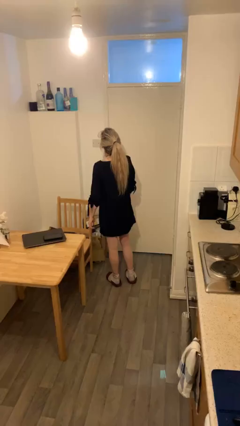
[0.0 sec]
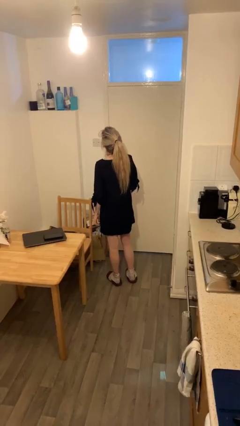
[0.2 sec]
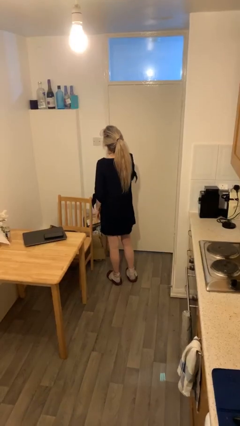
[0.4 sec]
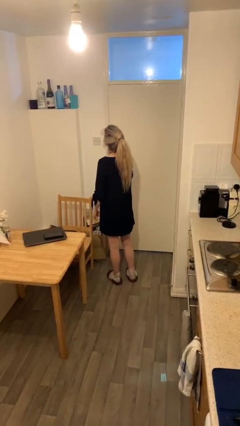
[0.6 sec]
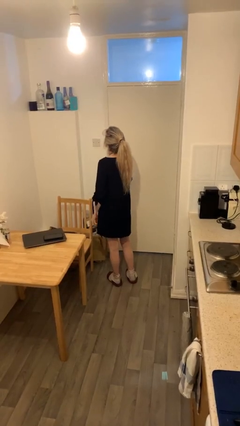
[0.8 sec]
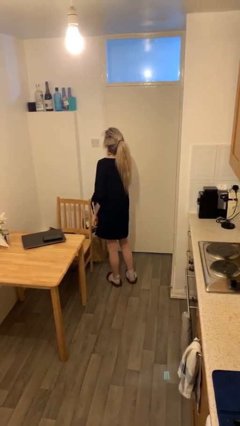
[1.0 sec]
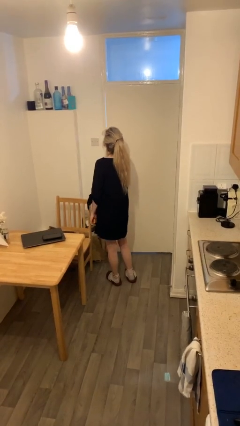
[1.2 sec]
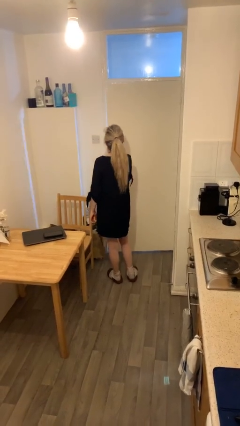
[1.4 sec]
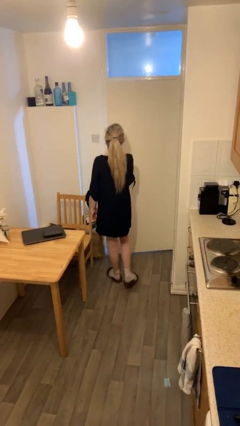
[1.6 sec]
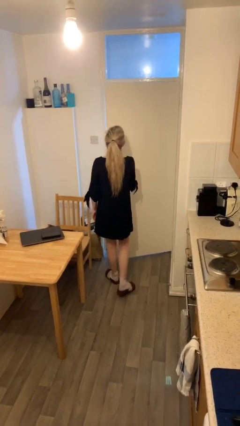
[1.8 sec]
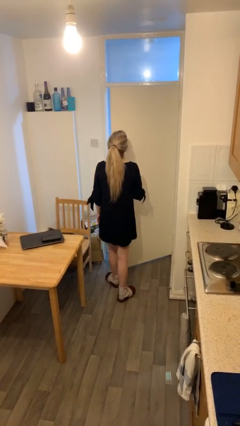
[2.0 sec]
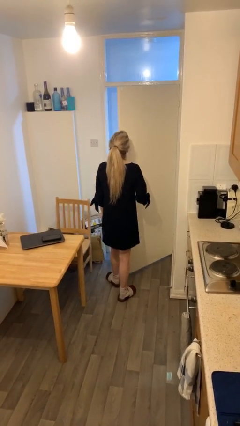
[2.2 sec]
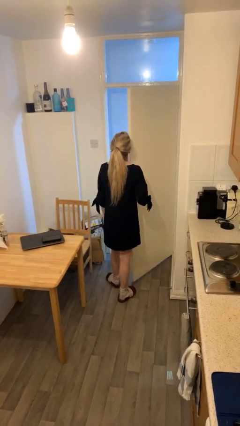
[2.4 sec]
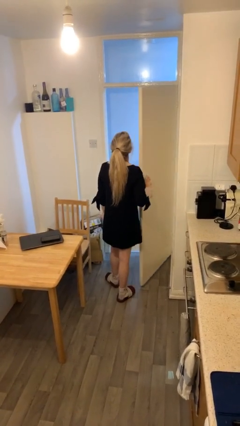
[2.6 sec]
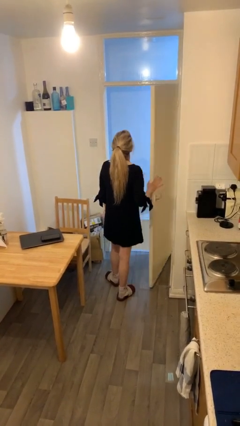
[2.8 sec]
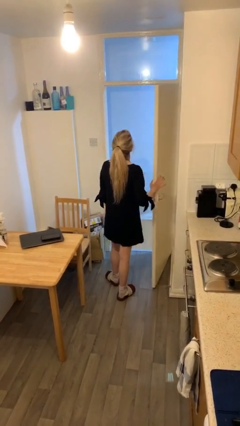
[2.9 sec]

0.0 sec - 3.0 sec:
person opens facility door

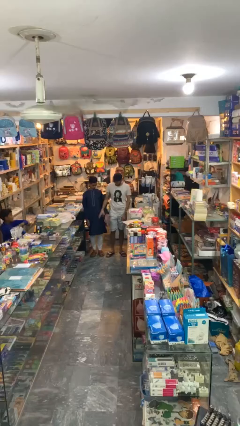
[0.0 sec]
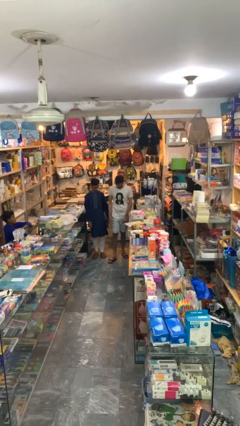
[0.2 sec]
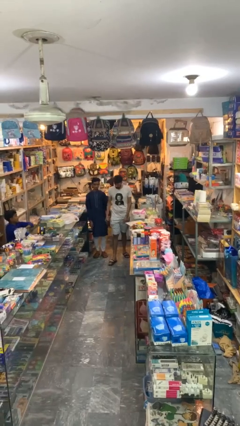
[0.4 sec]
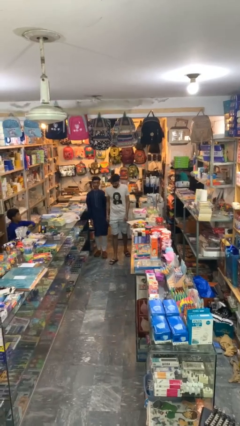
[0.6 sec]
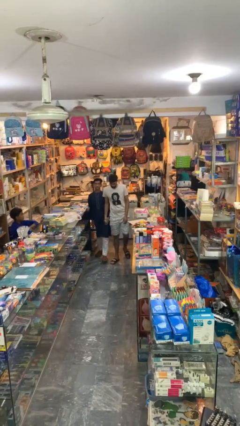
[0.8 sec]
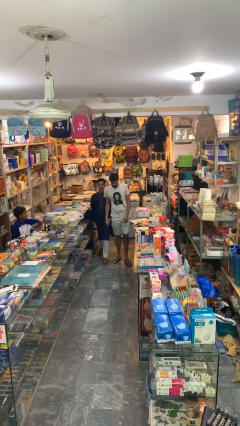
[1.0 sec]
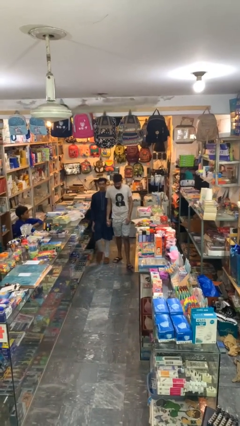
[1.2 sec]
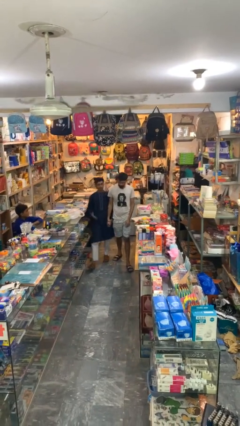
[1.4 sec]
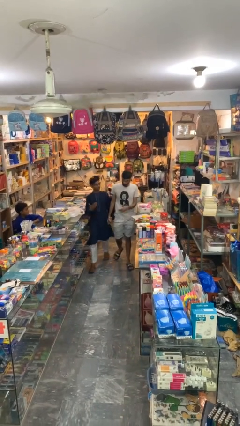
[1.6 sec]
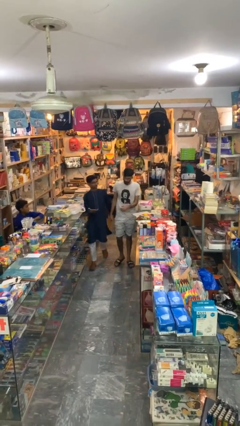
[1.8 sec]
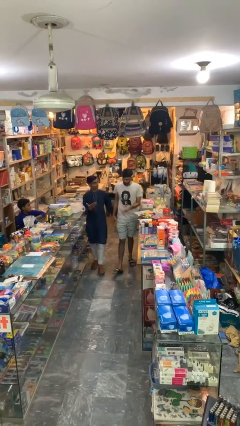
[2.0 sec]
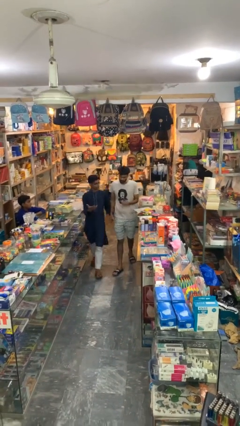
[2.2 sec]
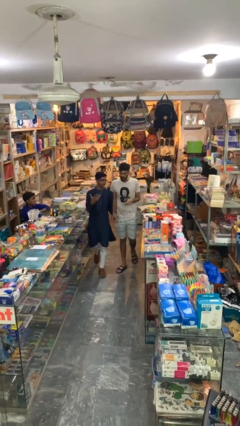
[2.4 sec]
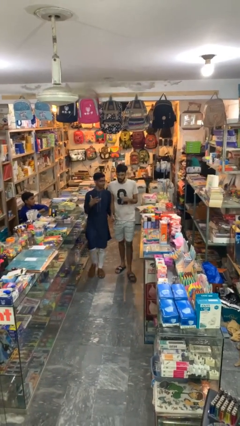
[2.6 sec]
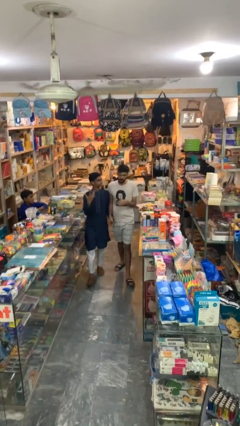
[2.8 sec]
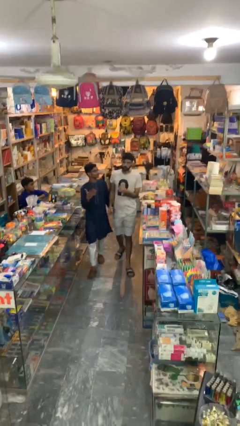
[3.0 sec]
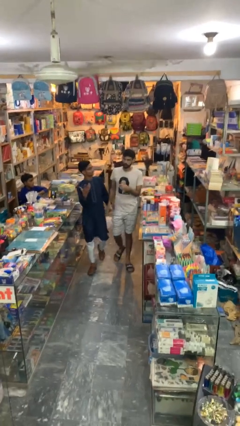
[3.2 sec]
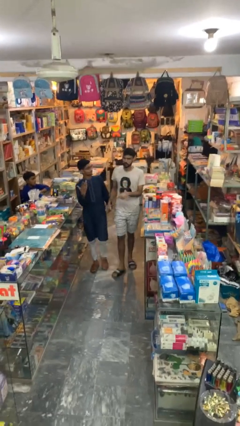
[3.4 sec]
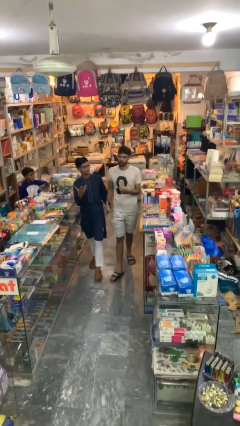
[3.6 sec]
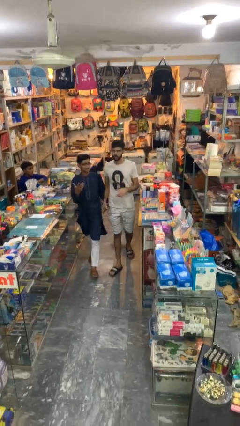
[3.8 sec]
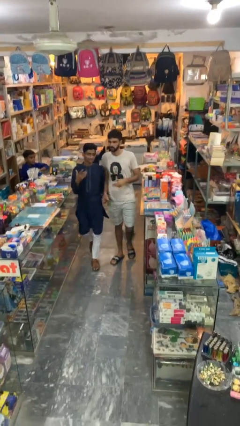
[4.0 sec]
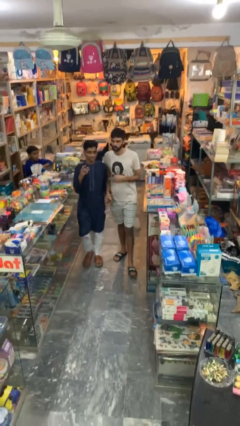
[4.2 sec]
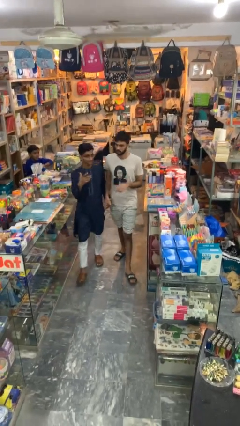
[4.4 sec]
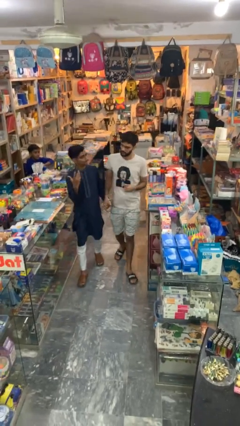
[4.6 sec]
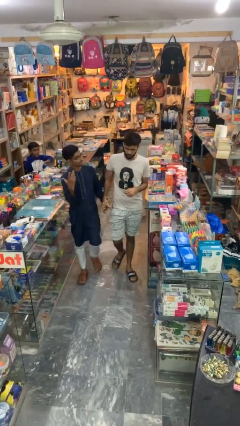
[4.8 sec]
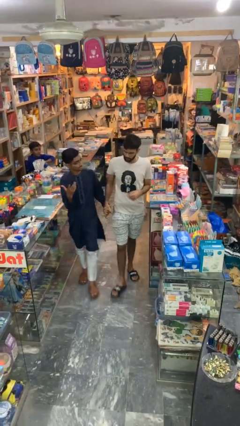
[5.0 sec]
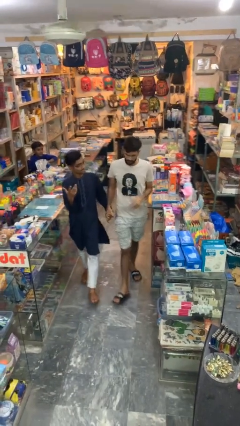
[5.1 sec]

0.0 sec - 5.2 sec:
person holds hand

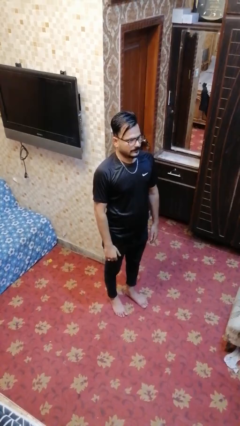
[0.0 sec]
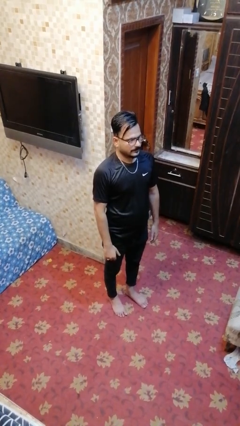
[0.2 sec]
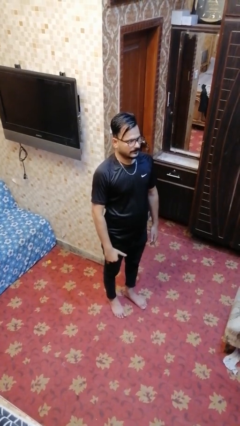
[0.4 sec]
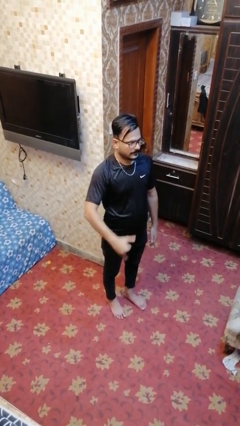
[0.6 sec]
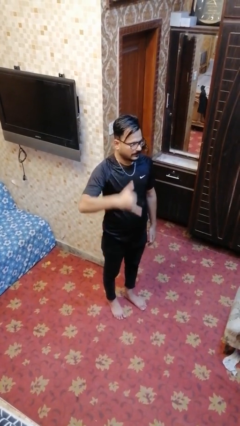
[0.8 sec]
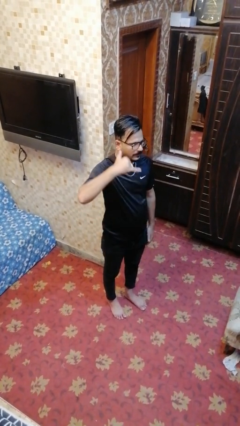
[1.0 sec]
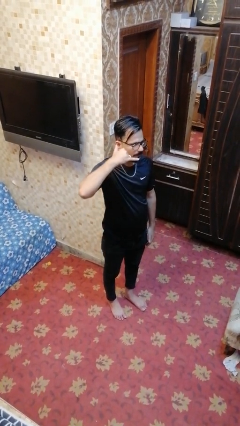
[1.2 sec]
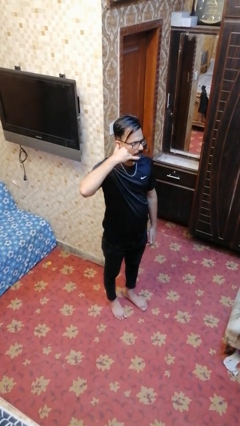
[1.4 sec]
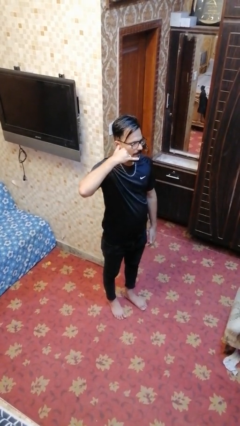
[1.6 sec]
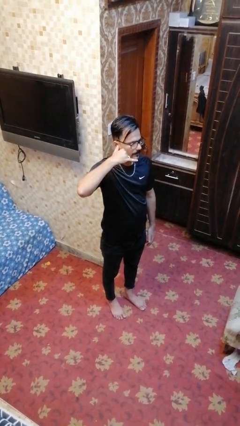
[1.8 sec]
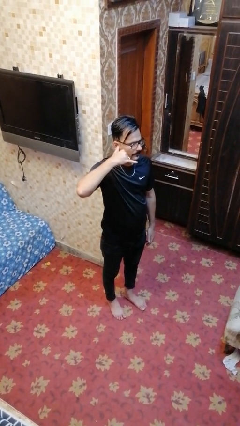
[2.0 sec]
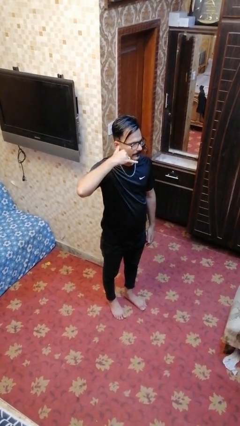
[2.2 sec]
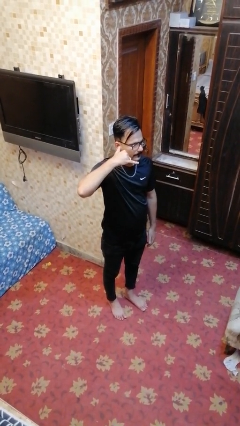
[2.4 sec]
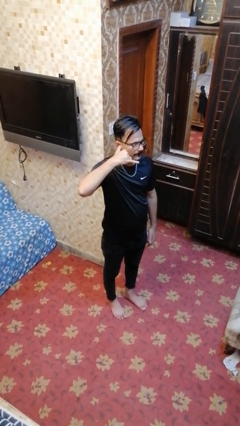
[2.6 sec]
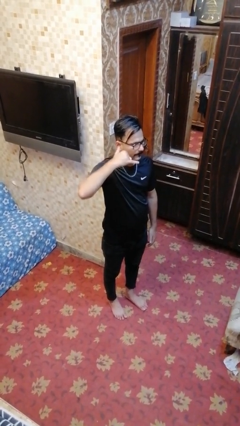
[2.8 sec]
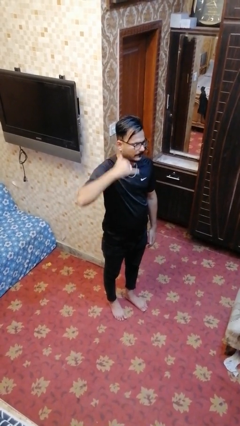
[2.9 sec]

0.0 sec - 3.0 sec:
person gestures call me

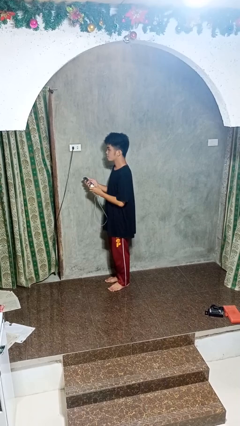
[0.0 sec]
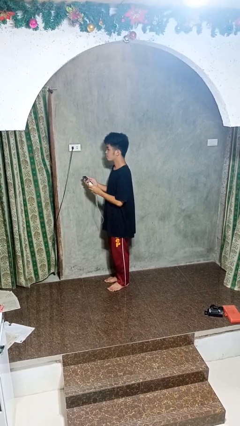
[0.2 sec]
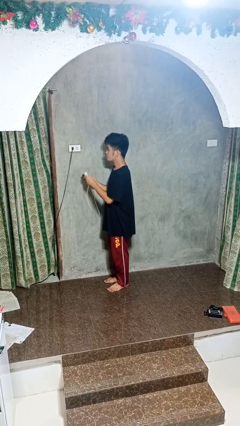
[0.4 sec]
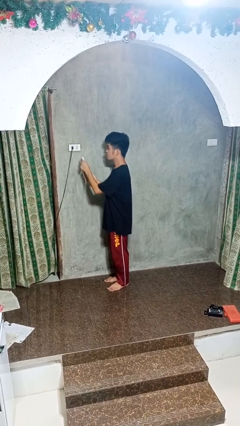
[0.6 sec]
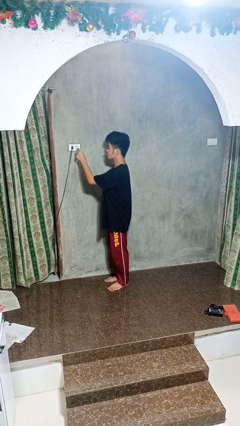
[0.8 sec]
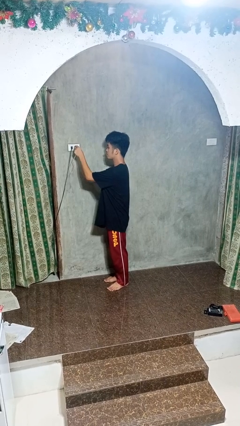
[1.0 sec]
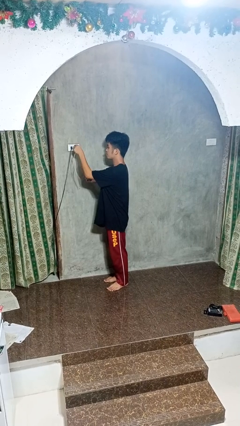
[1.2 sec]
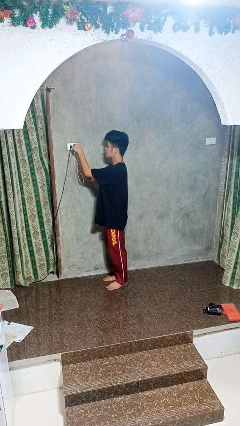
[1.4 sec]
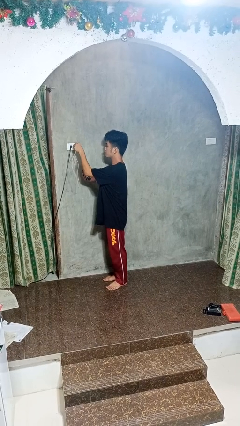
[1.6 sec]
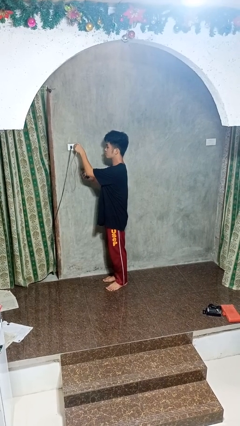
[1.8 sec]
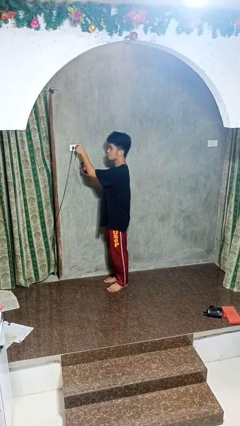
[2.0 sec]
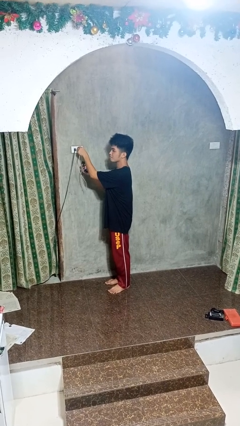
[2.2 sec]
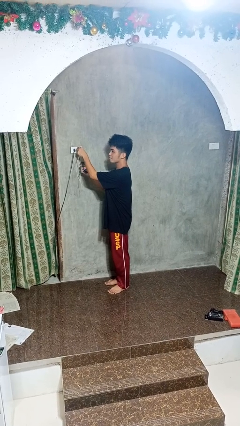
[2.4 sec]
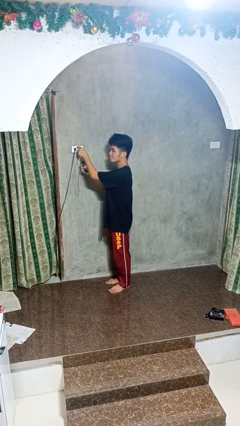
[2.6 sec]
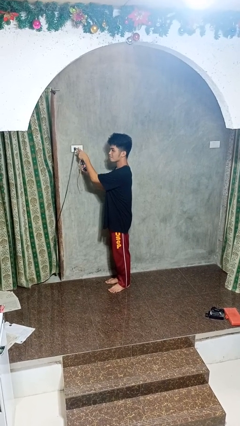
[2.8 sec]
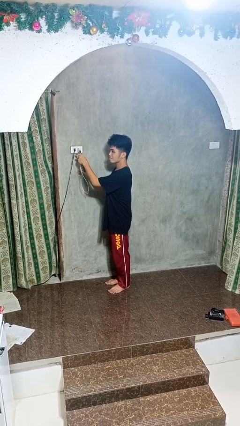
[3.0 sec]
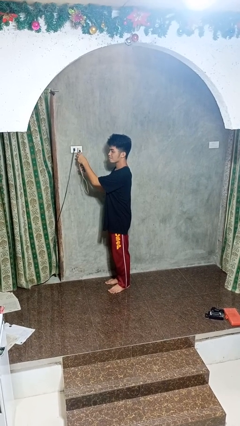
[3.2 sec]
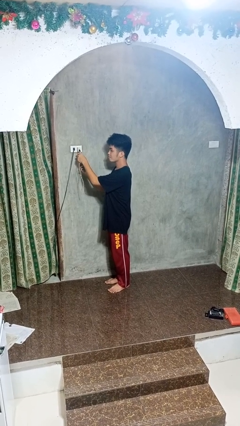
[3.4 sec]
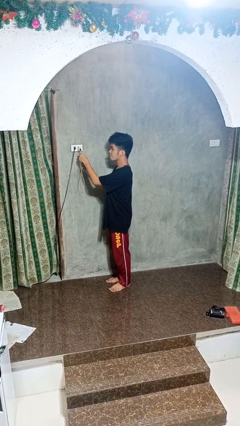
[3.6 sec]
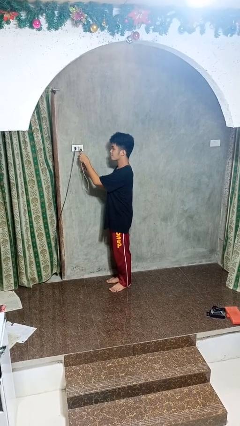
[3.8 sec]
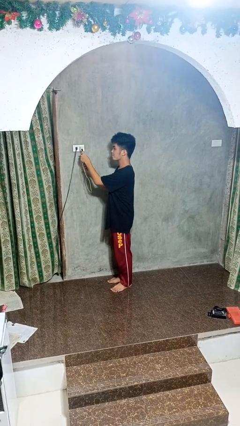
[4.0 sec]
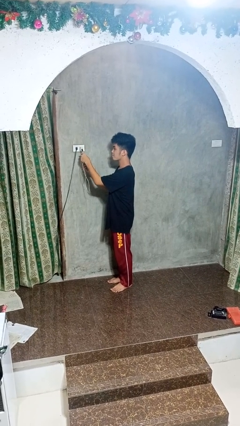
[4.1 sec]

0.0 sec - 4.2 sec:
person plugs into electrical socket

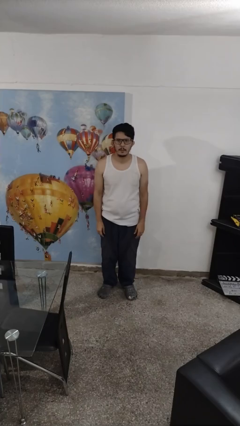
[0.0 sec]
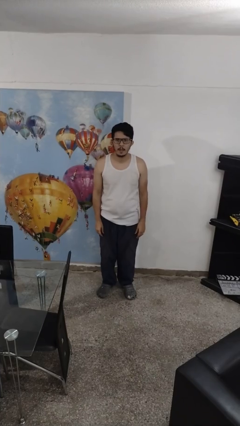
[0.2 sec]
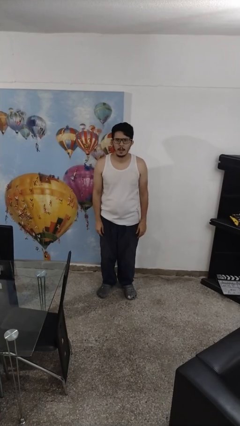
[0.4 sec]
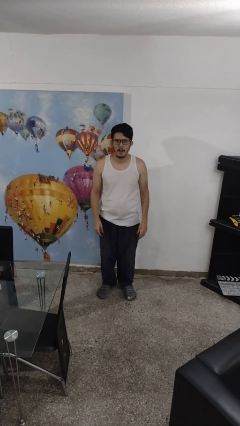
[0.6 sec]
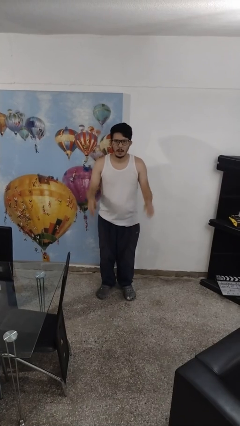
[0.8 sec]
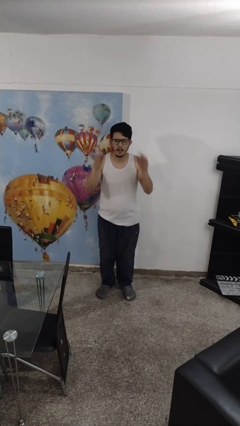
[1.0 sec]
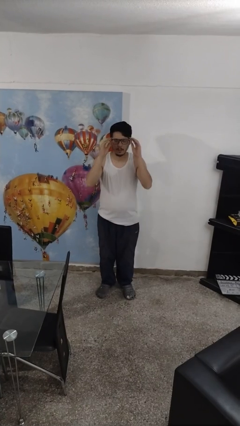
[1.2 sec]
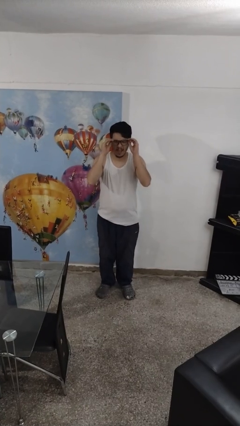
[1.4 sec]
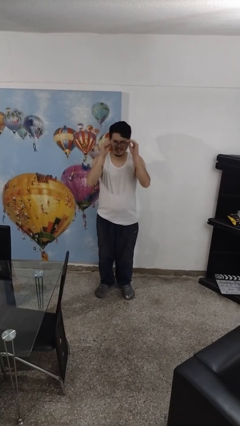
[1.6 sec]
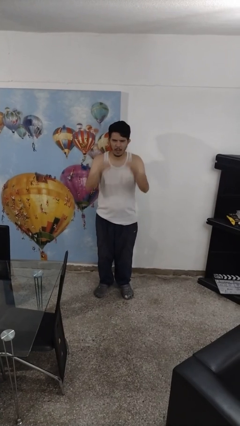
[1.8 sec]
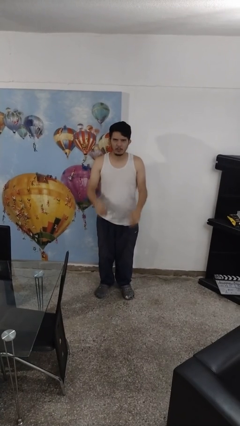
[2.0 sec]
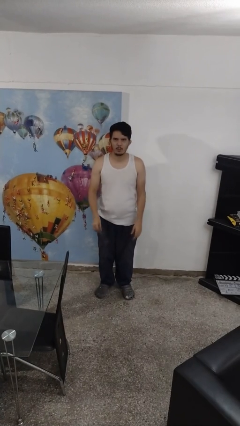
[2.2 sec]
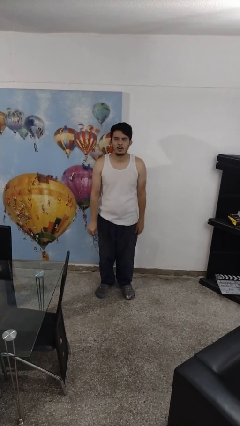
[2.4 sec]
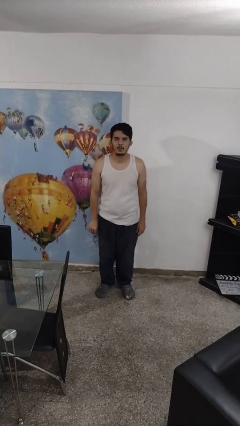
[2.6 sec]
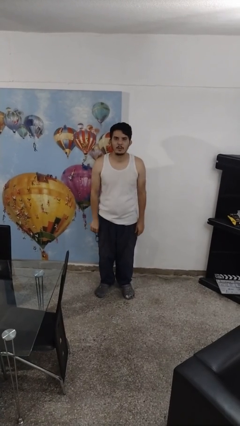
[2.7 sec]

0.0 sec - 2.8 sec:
person takes off glasses
